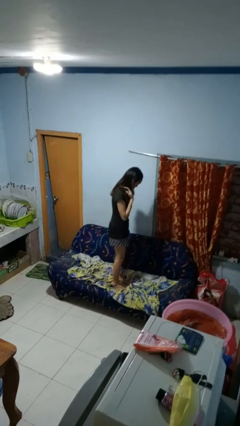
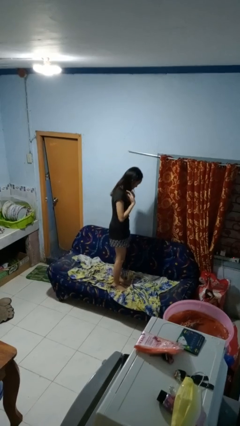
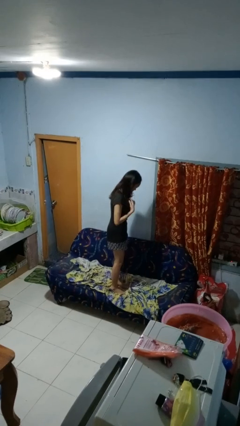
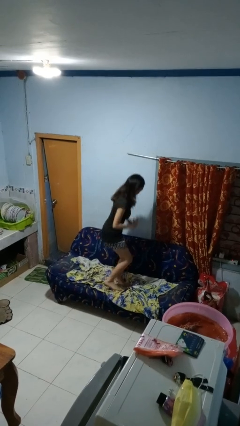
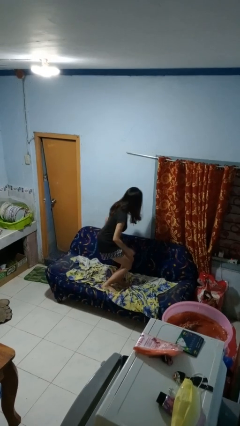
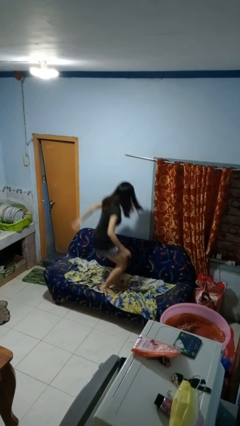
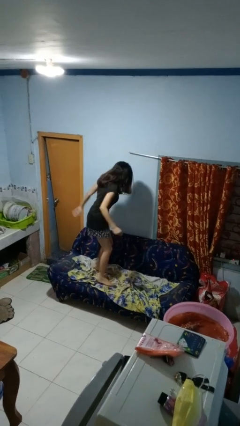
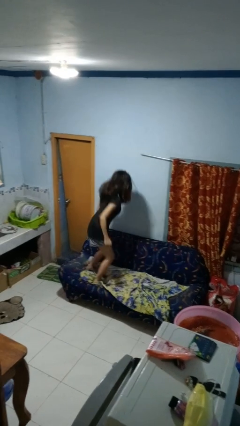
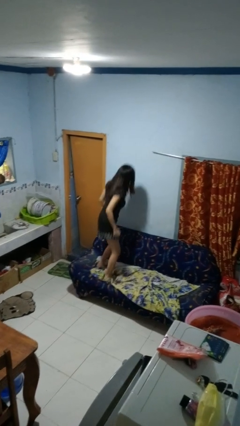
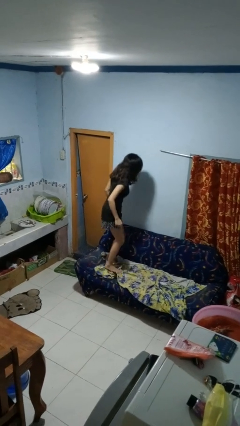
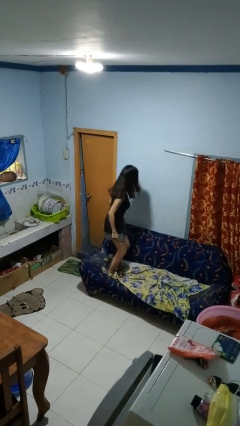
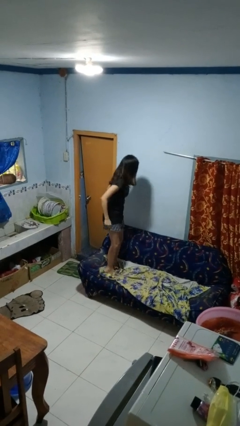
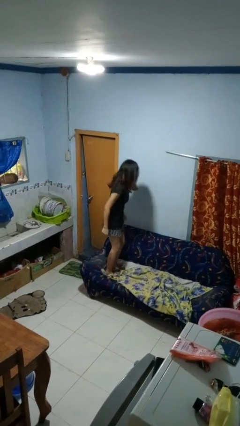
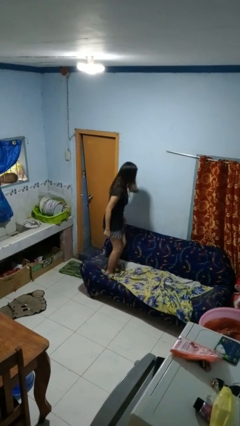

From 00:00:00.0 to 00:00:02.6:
person jumps on couch

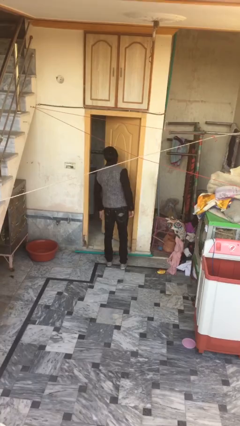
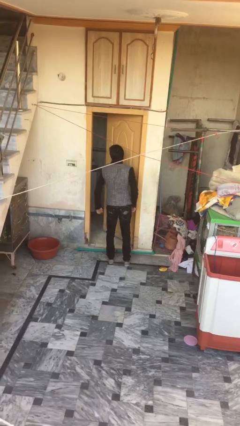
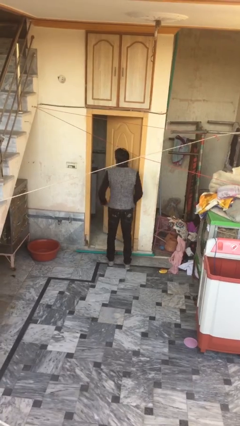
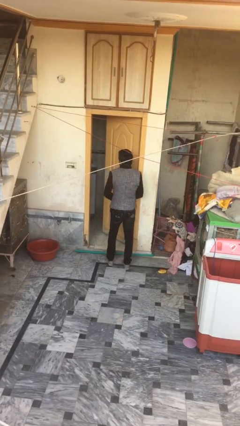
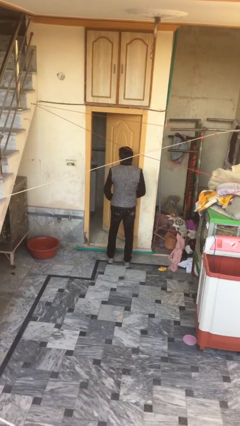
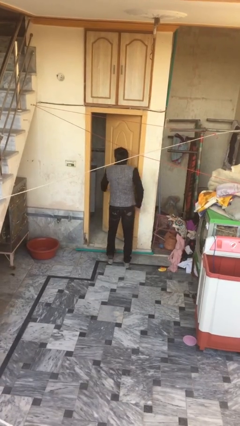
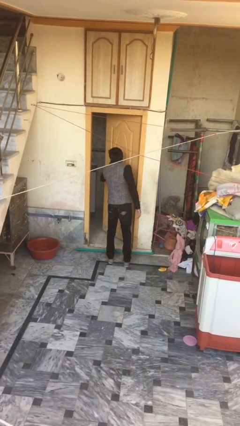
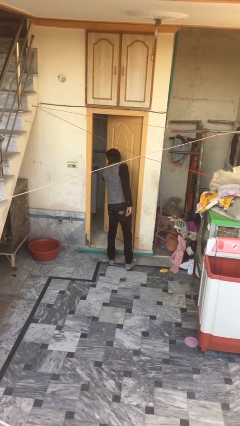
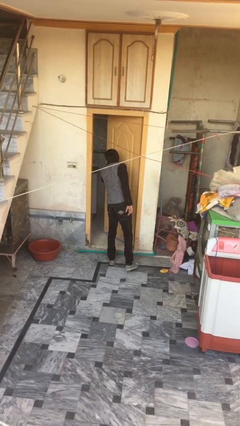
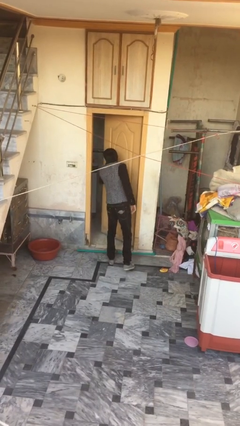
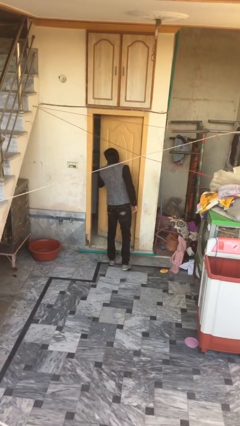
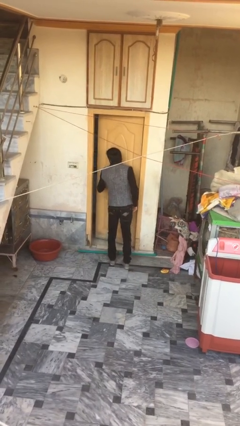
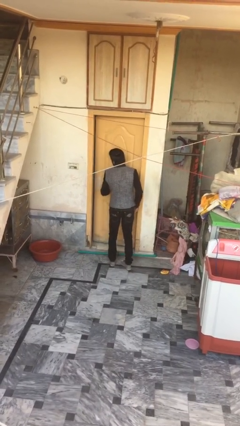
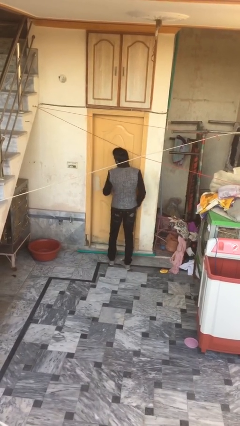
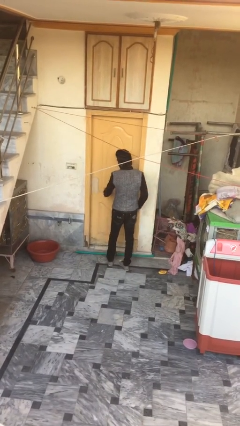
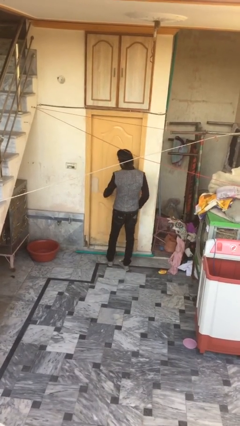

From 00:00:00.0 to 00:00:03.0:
person closes facility door

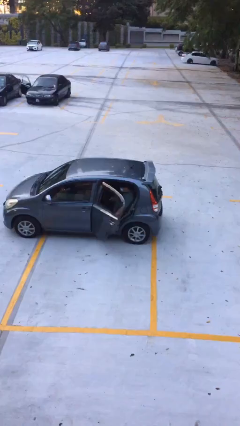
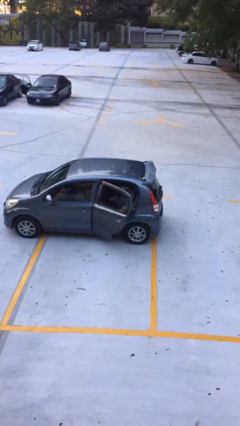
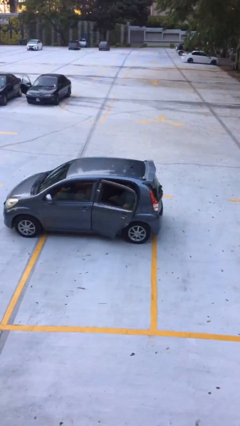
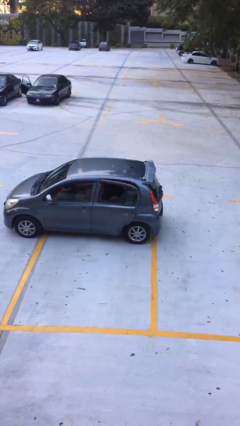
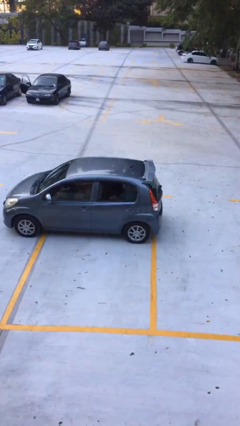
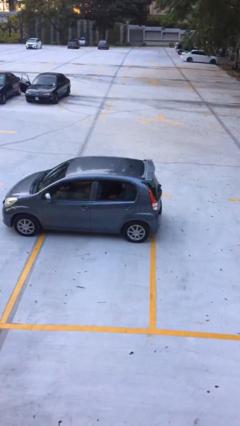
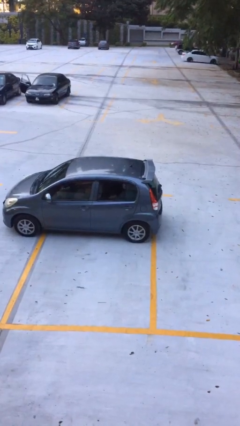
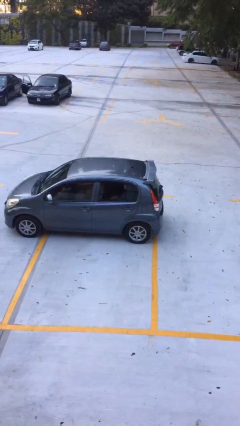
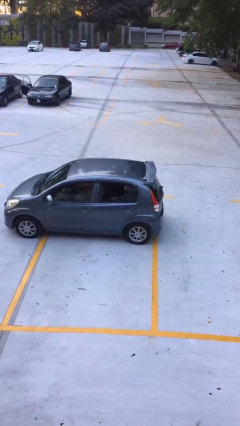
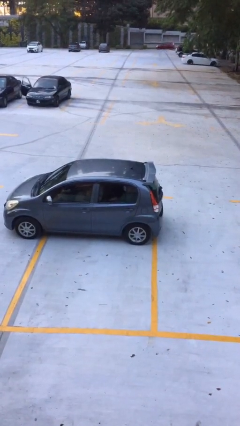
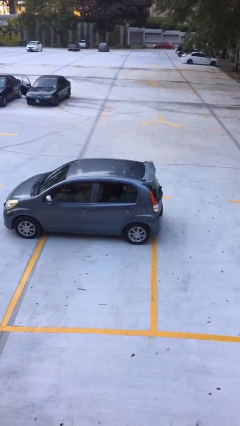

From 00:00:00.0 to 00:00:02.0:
person closes car door

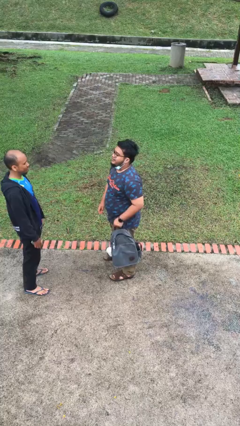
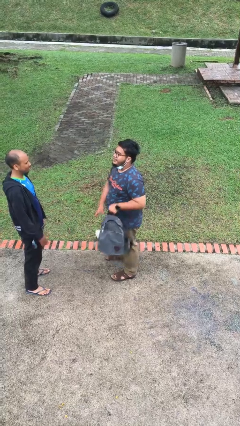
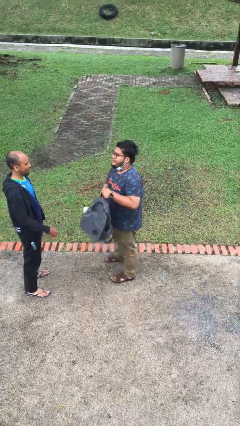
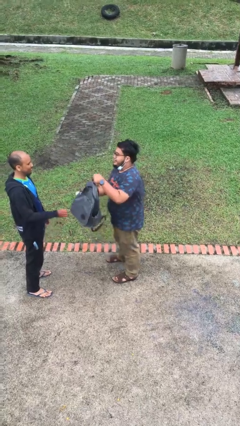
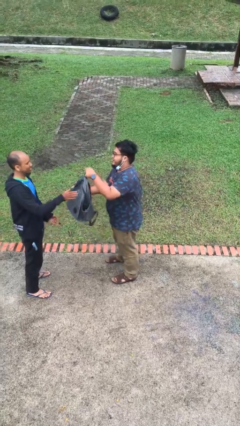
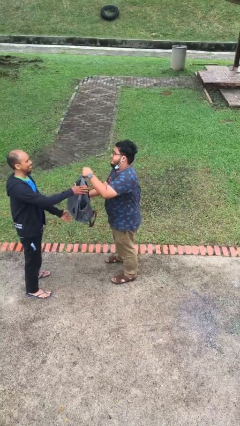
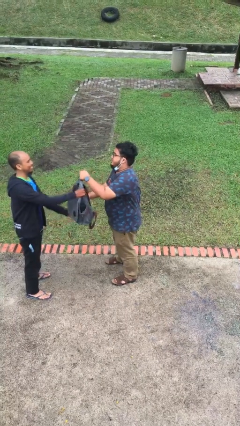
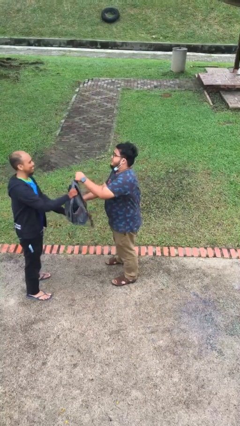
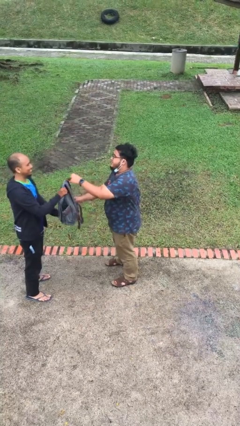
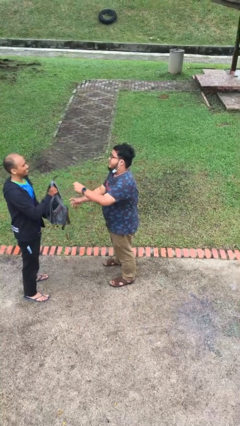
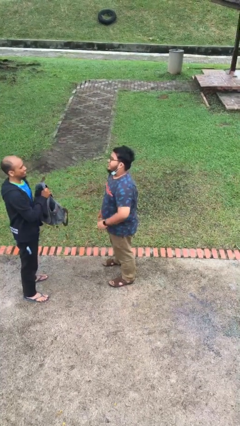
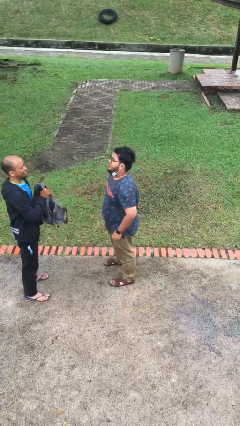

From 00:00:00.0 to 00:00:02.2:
person transfers object to person

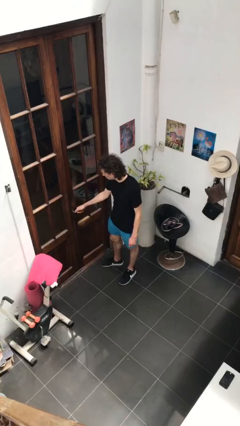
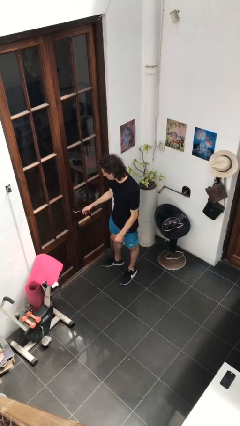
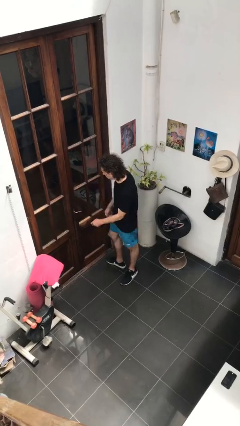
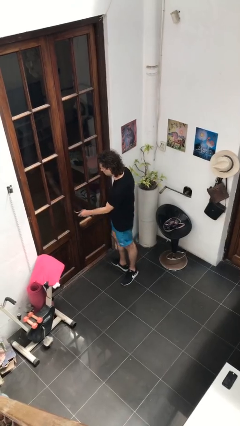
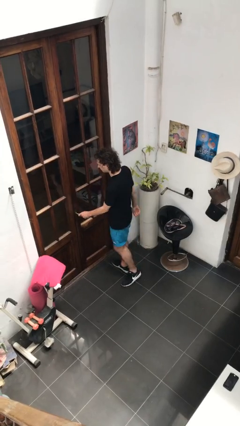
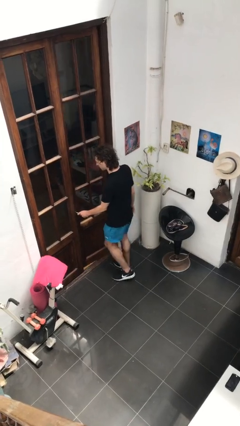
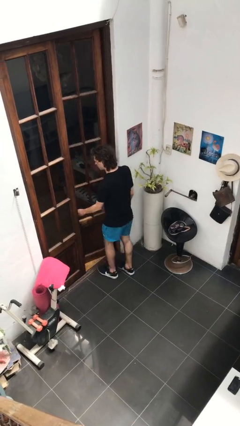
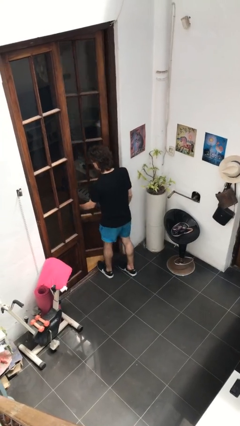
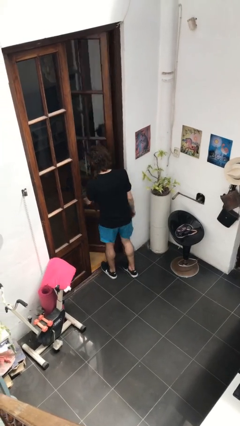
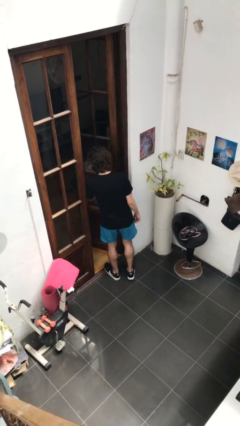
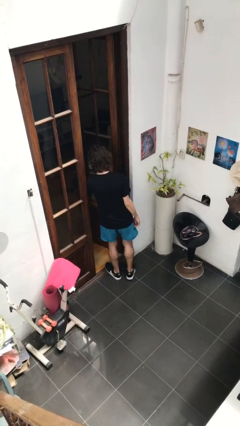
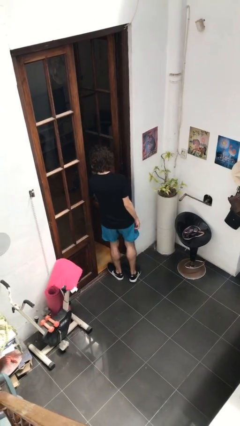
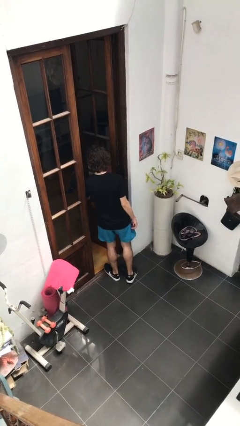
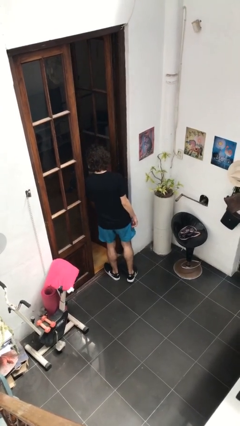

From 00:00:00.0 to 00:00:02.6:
person opens facility door

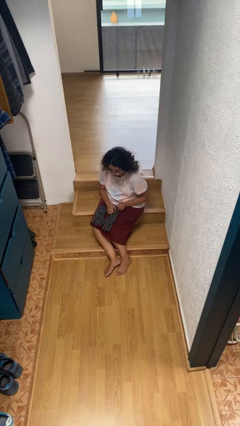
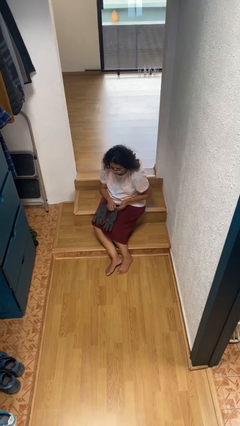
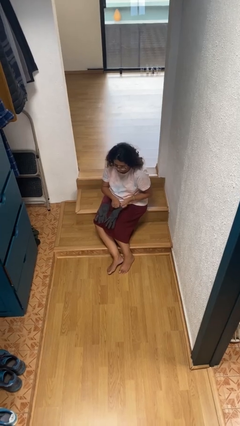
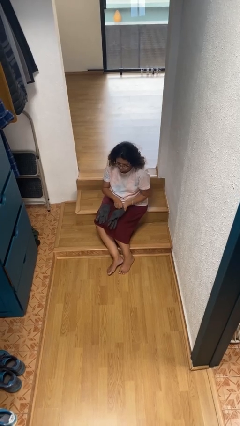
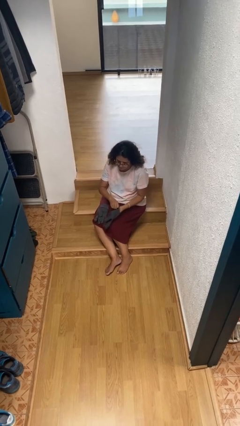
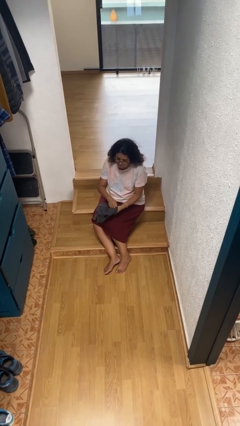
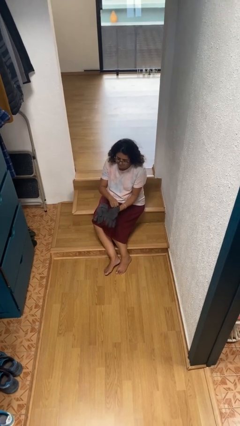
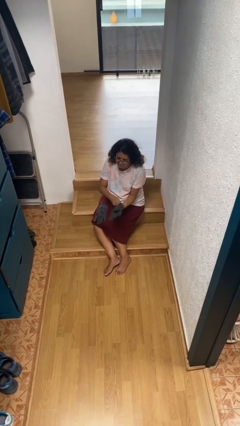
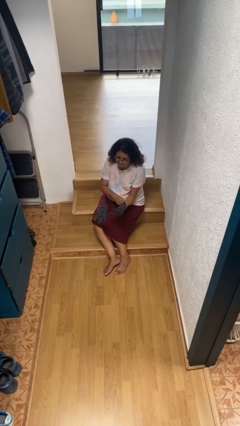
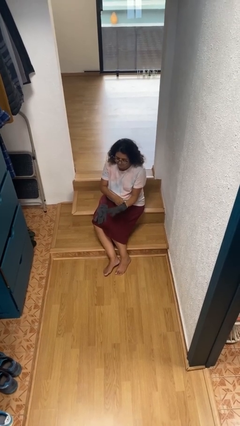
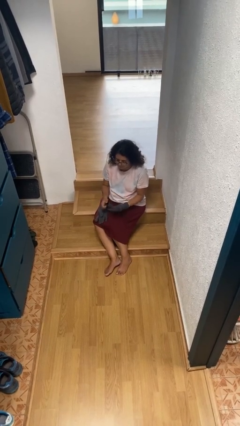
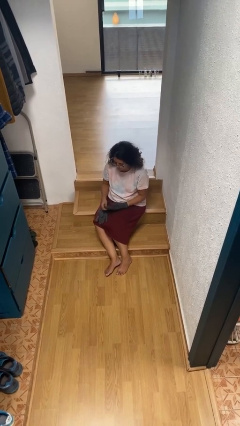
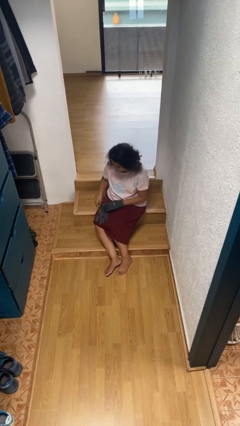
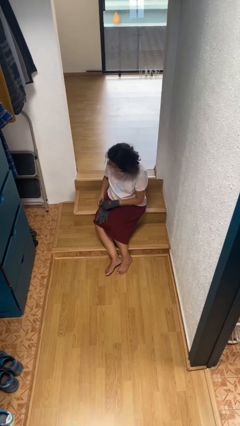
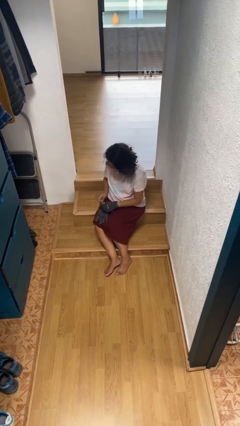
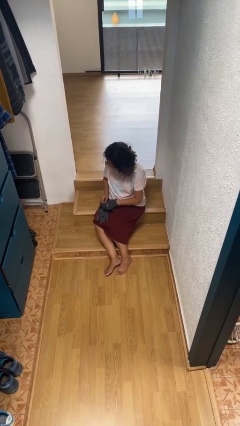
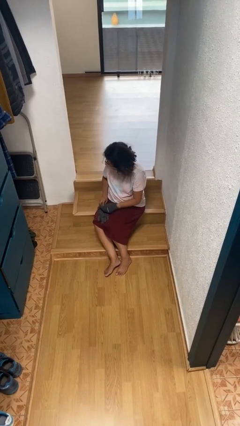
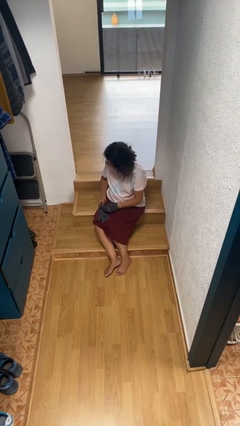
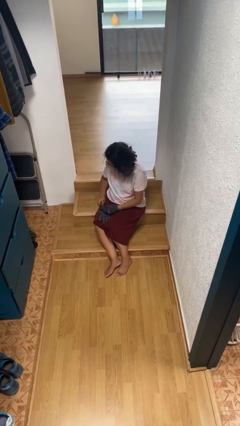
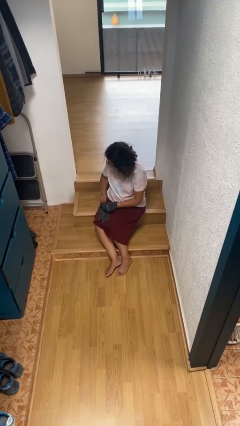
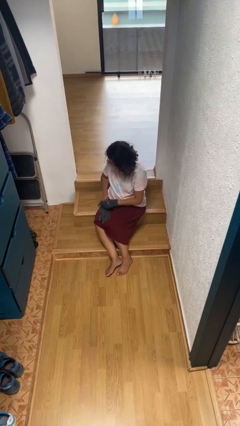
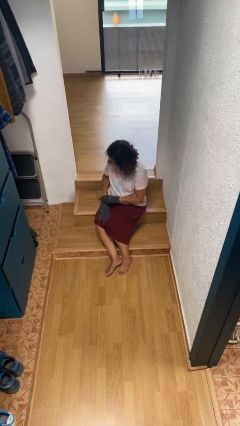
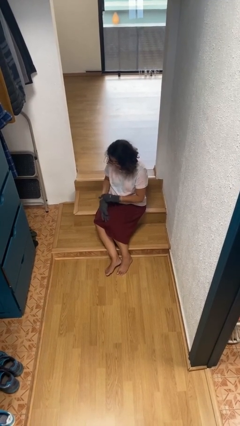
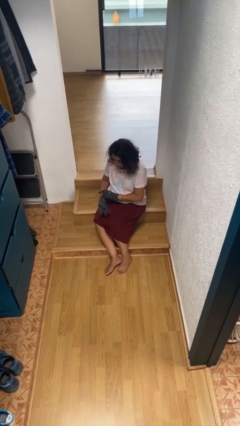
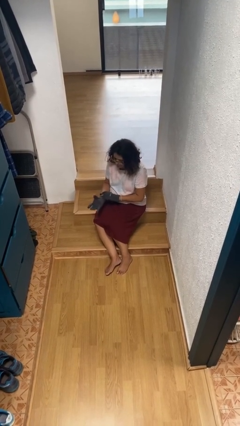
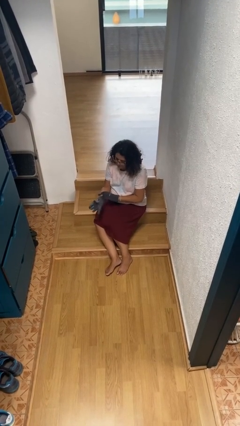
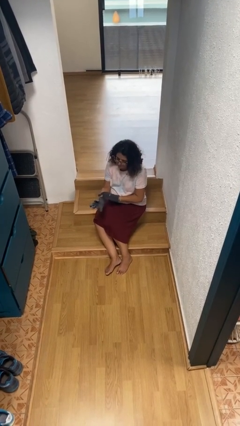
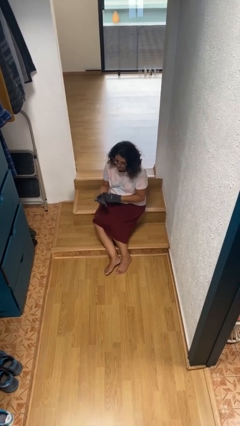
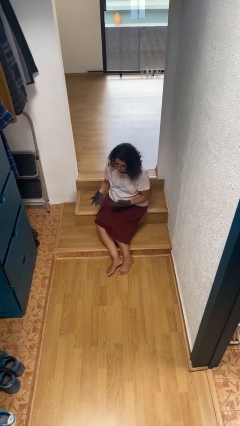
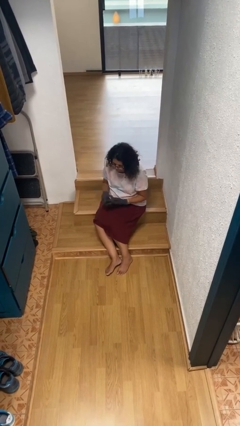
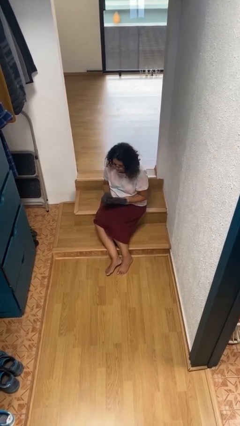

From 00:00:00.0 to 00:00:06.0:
person puts on gloves
